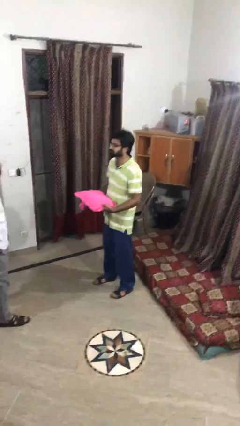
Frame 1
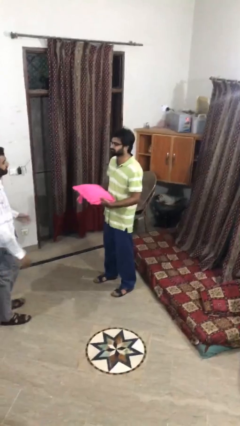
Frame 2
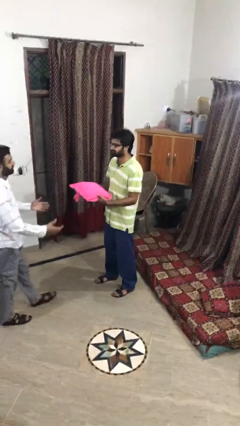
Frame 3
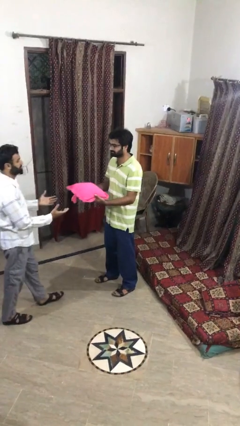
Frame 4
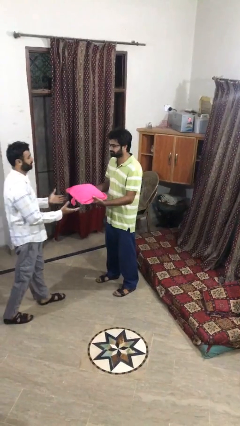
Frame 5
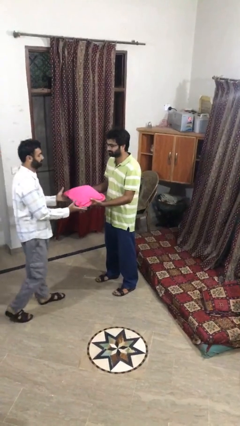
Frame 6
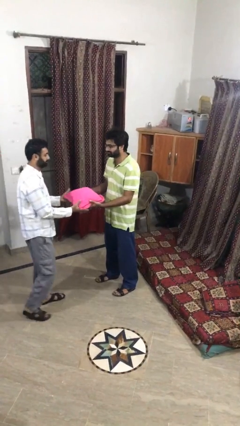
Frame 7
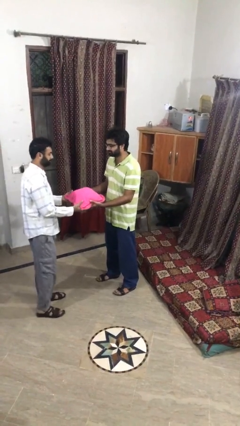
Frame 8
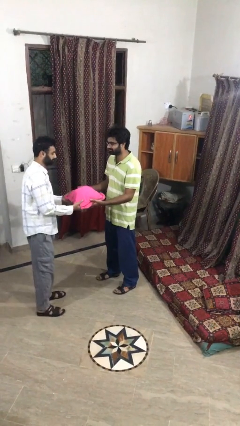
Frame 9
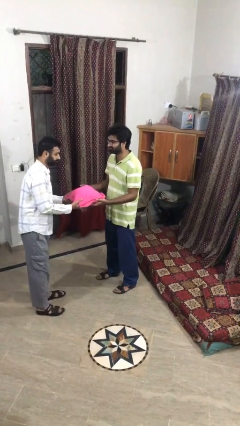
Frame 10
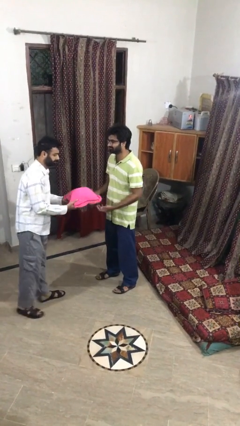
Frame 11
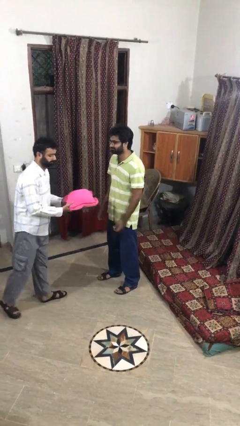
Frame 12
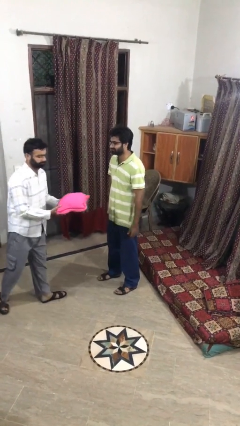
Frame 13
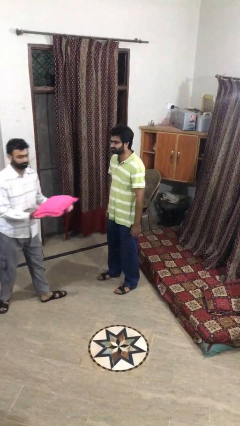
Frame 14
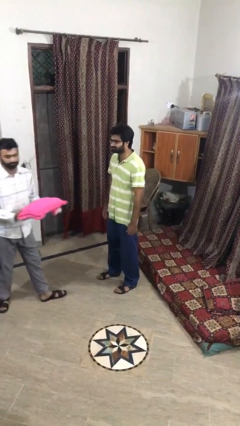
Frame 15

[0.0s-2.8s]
person transfers object to person

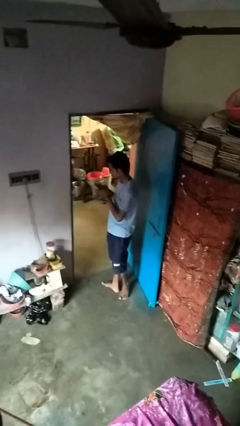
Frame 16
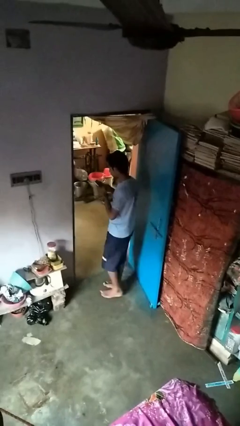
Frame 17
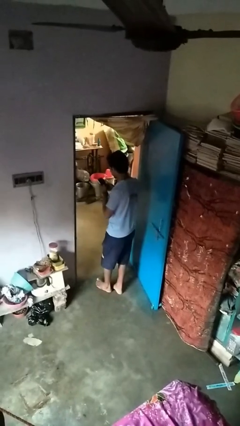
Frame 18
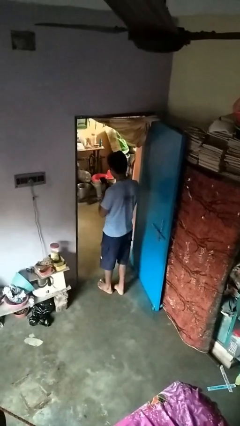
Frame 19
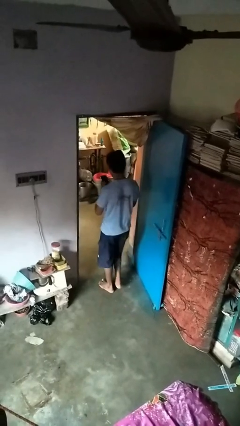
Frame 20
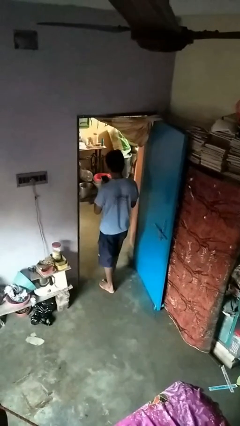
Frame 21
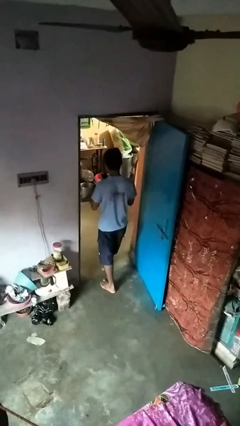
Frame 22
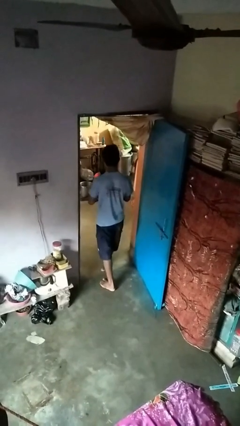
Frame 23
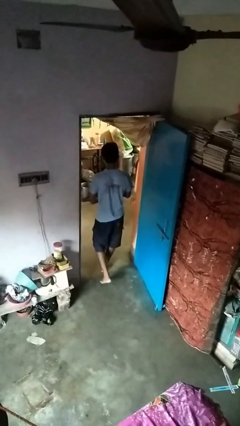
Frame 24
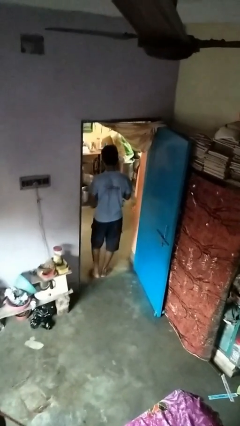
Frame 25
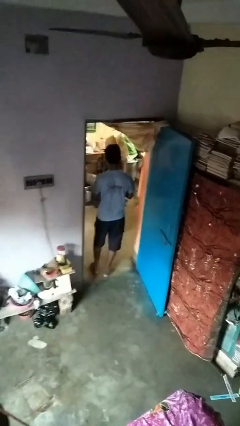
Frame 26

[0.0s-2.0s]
person exits scene through structure

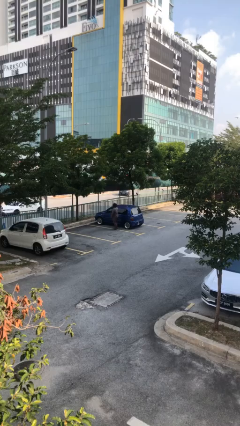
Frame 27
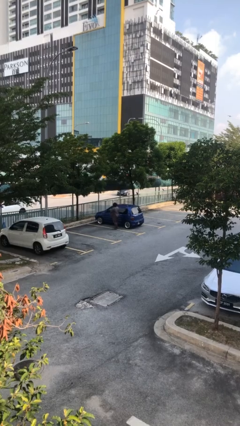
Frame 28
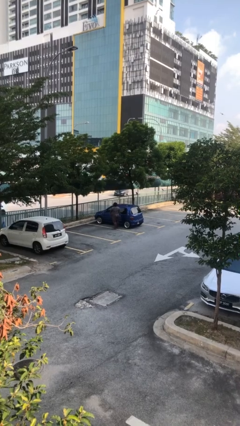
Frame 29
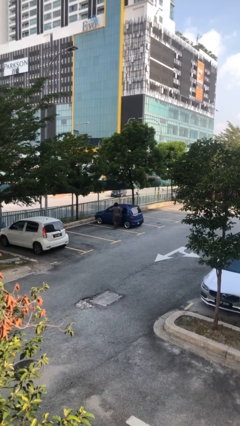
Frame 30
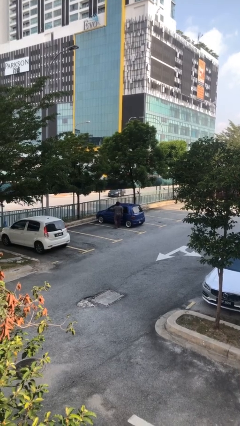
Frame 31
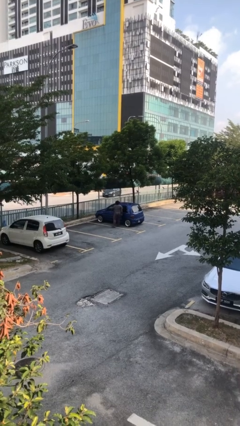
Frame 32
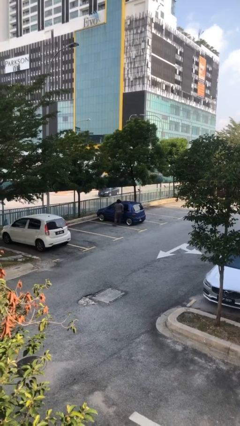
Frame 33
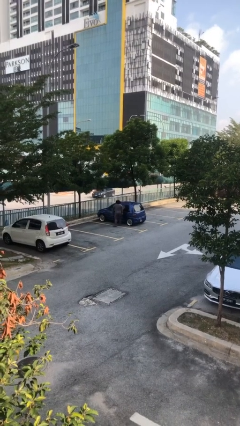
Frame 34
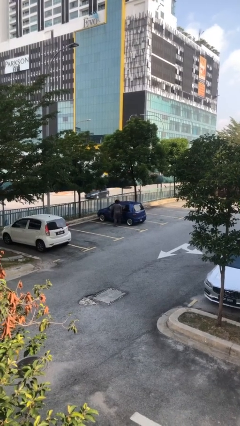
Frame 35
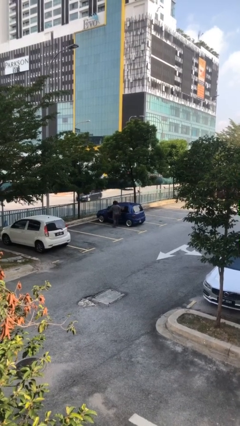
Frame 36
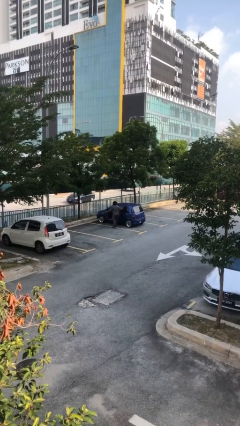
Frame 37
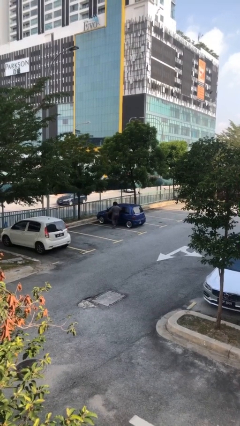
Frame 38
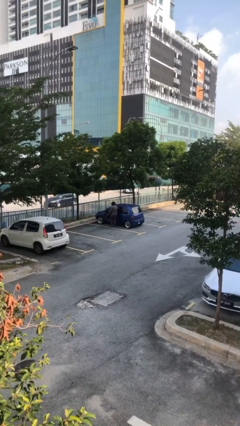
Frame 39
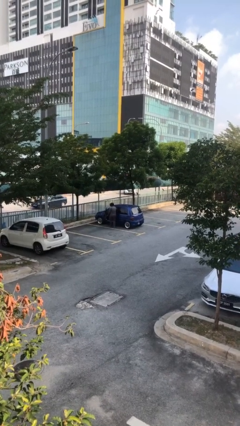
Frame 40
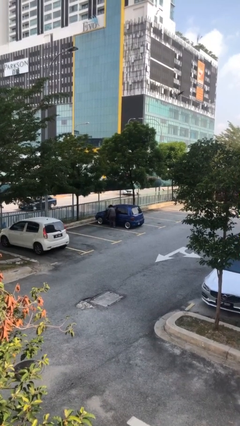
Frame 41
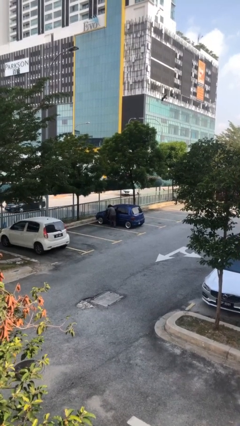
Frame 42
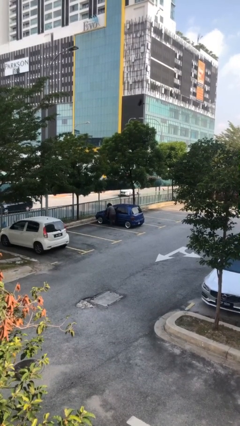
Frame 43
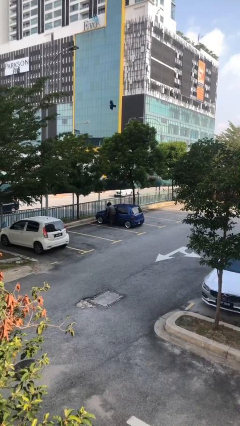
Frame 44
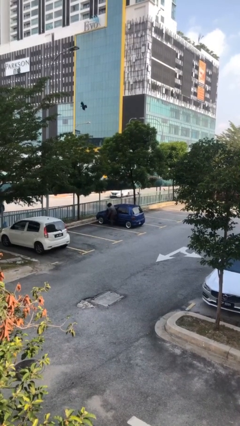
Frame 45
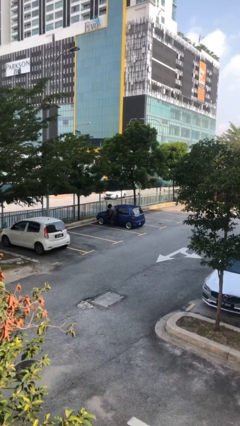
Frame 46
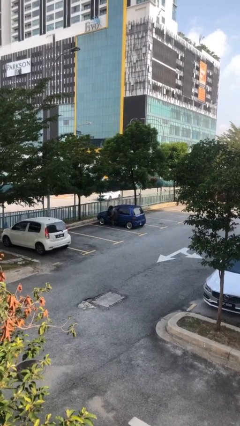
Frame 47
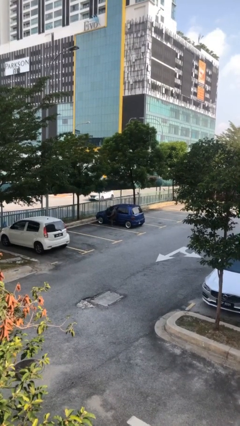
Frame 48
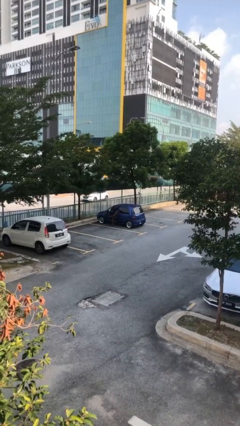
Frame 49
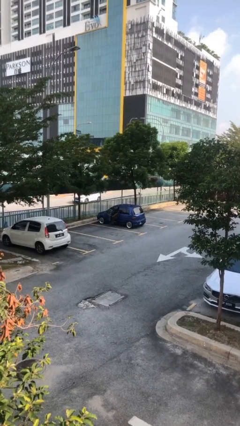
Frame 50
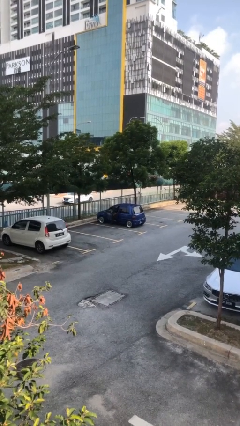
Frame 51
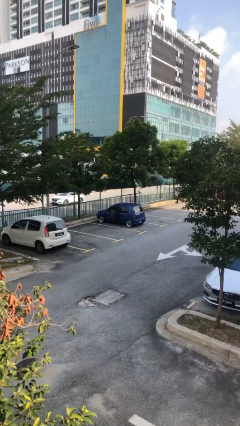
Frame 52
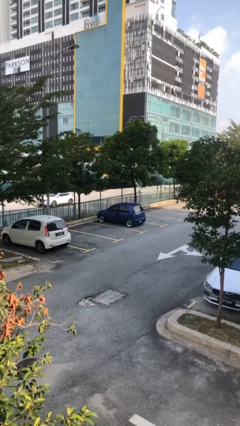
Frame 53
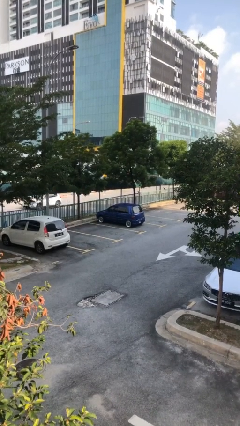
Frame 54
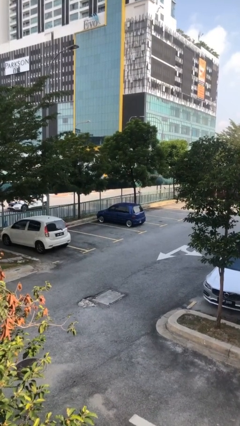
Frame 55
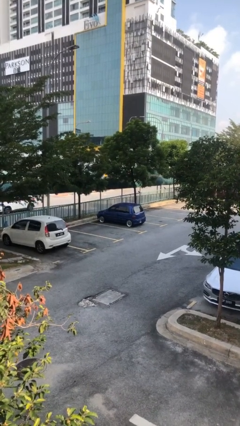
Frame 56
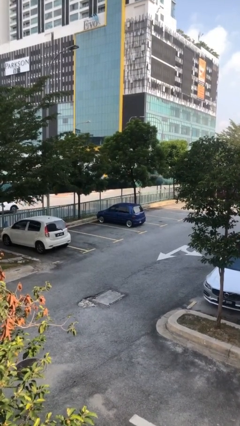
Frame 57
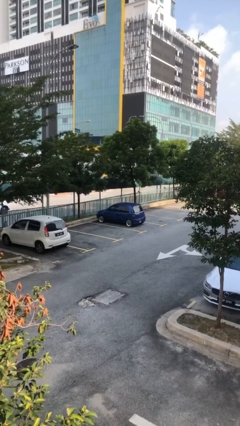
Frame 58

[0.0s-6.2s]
car picks up person

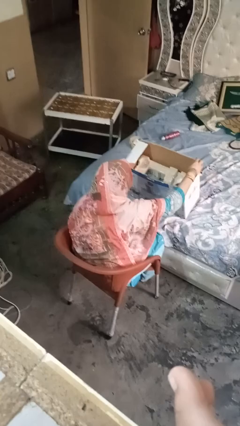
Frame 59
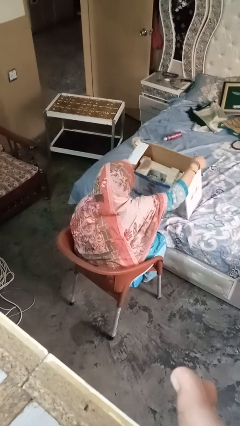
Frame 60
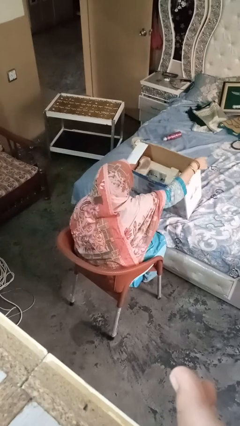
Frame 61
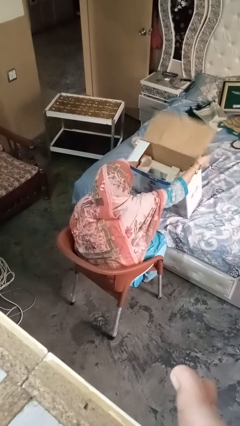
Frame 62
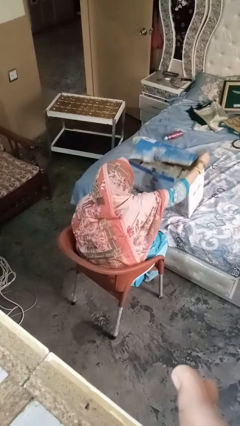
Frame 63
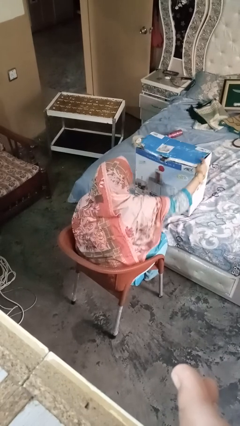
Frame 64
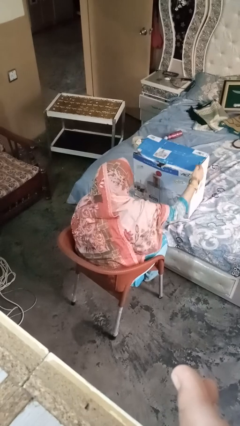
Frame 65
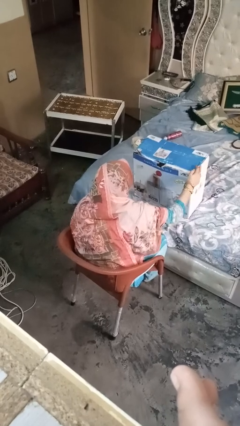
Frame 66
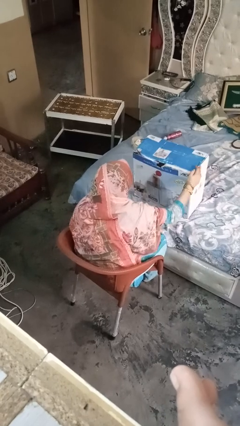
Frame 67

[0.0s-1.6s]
person closes box

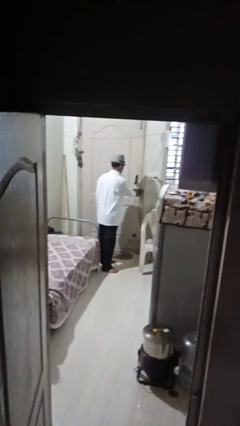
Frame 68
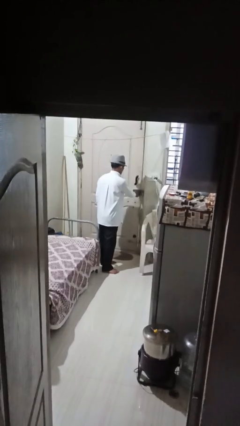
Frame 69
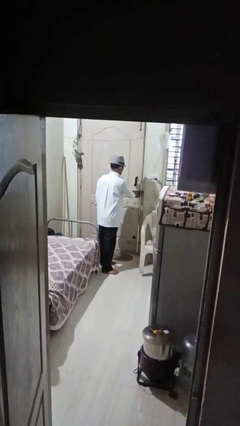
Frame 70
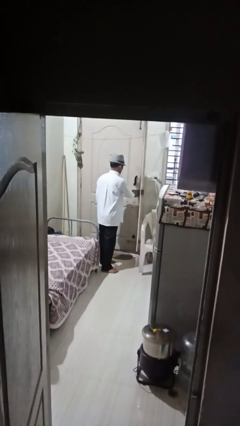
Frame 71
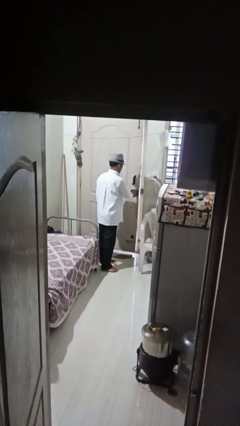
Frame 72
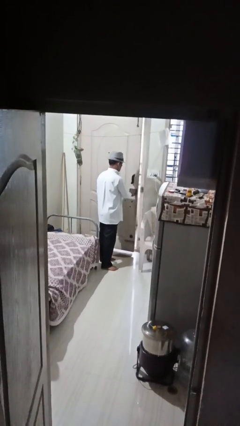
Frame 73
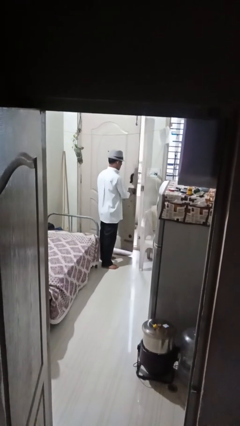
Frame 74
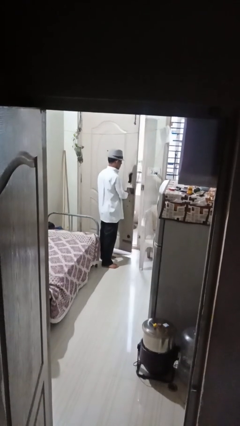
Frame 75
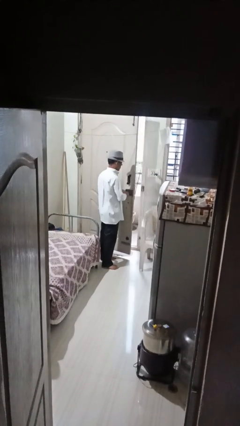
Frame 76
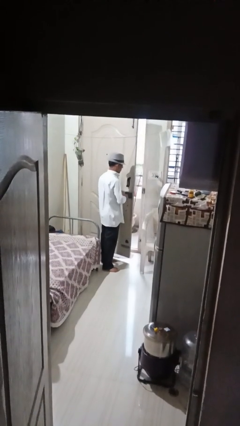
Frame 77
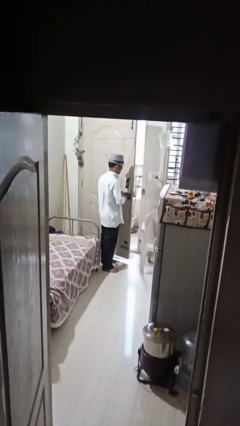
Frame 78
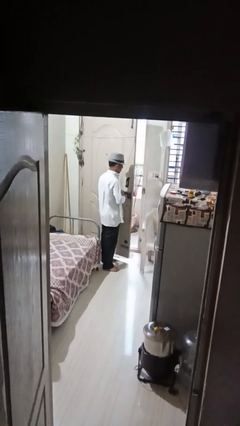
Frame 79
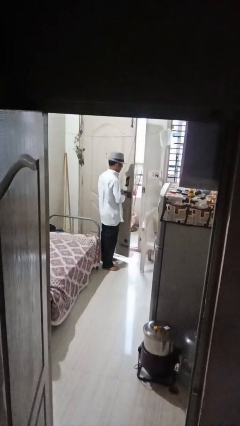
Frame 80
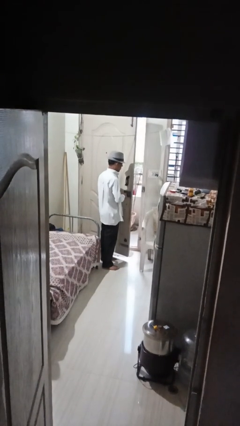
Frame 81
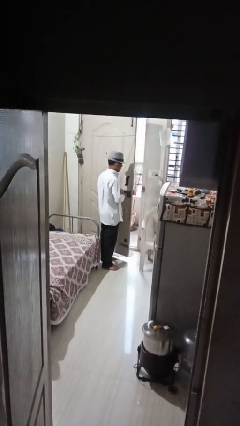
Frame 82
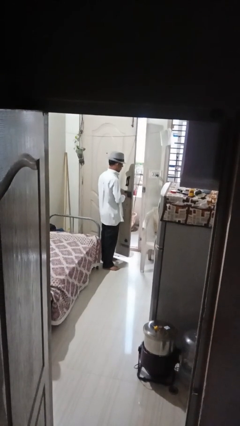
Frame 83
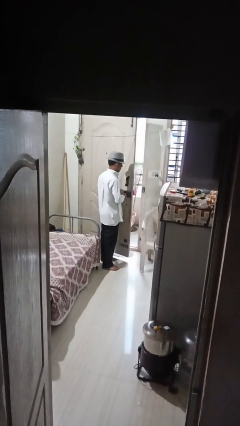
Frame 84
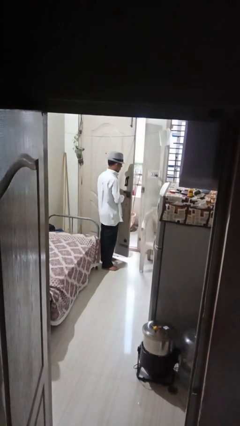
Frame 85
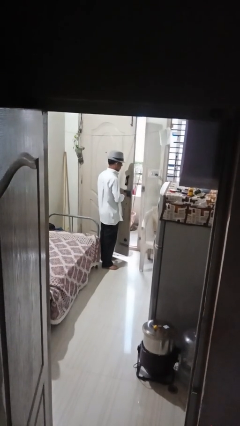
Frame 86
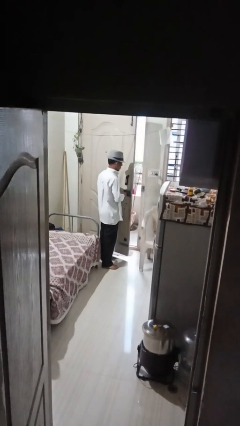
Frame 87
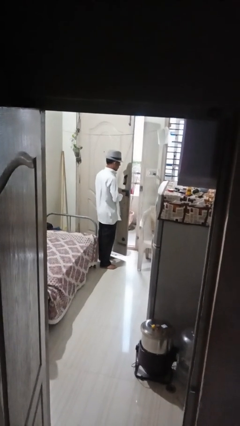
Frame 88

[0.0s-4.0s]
person opens facility door

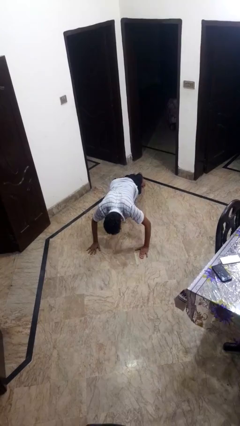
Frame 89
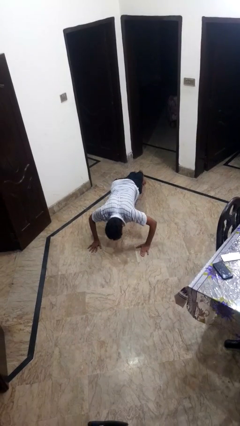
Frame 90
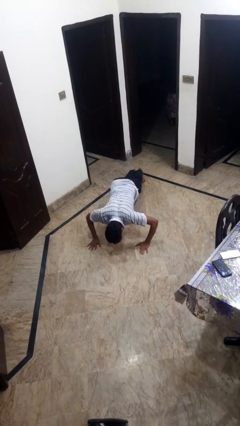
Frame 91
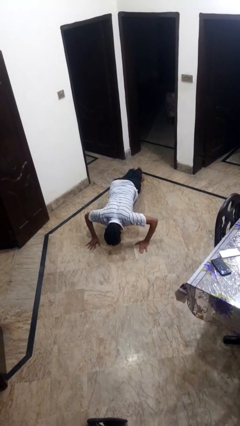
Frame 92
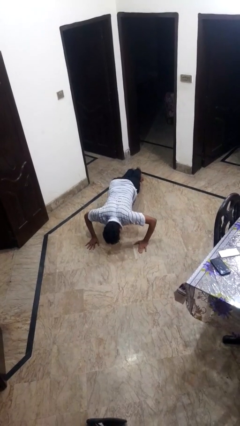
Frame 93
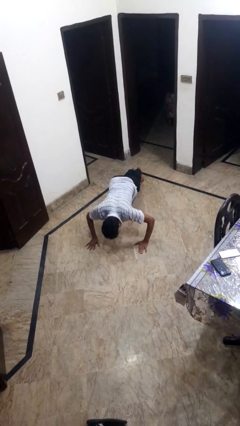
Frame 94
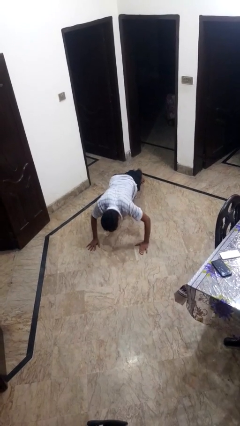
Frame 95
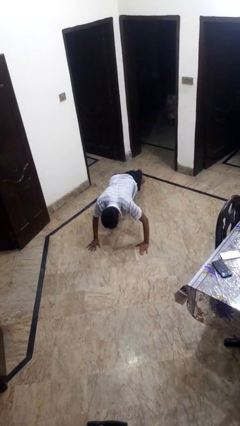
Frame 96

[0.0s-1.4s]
person exercises with pushup
